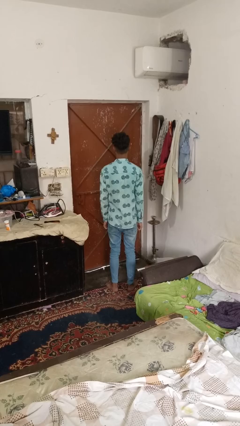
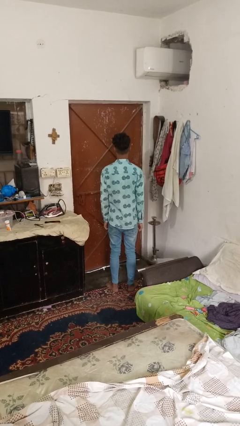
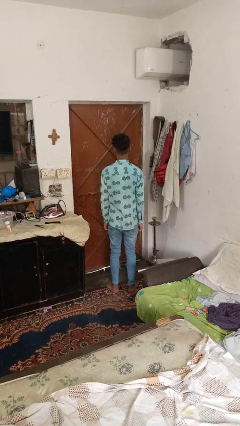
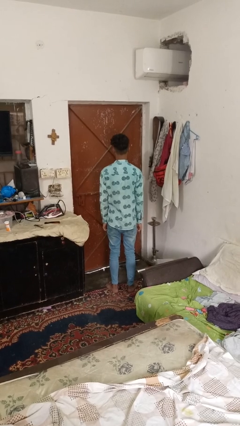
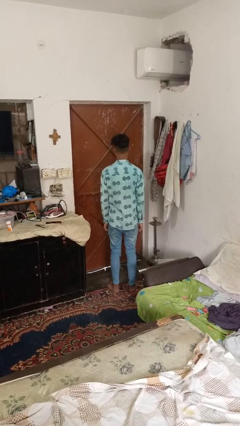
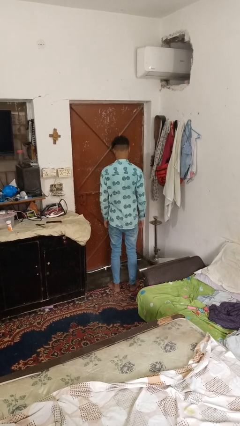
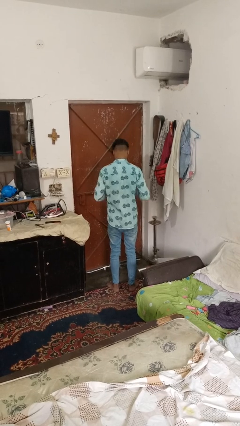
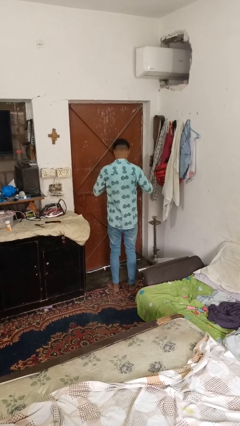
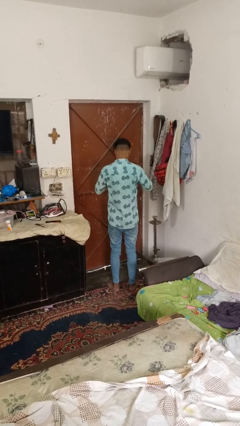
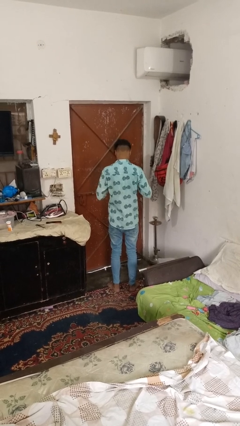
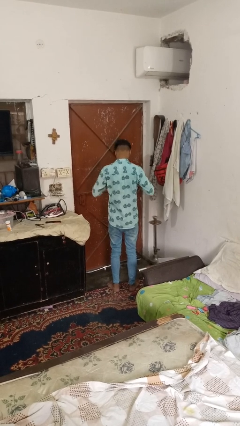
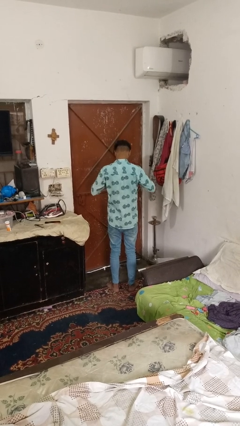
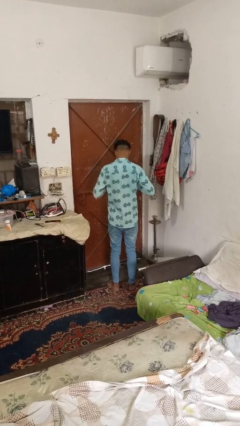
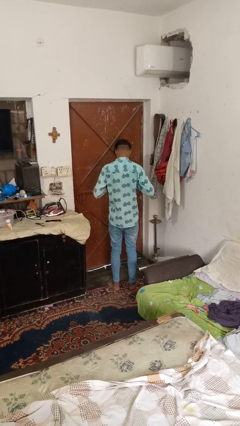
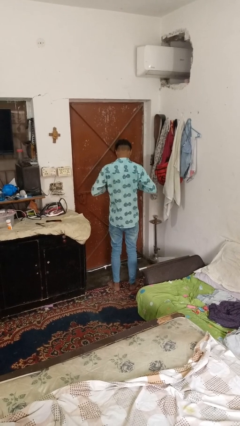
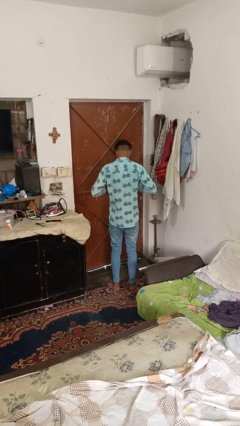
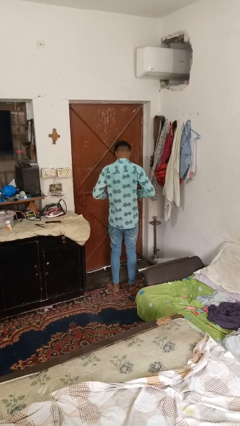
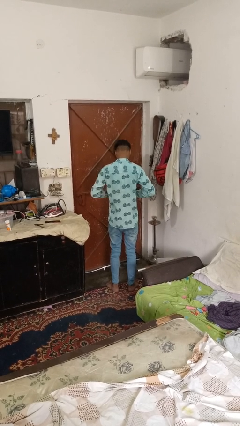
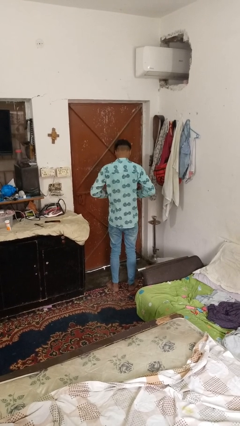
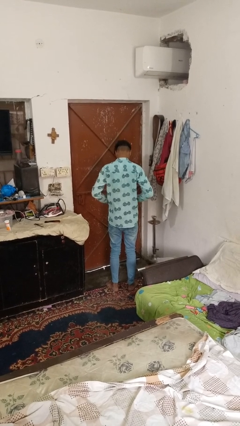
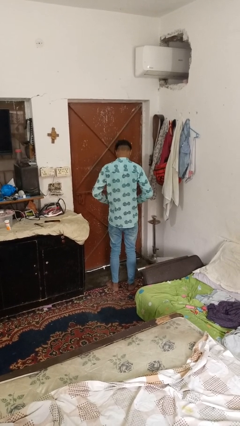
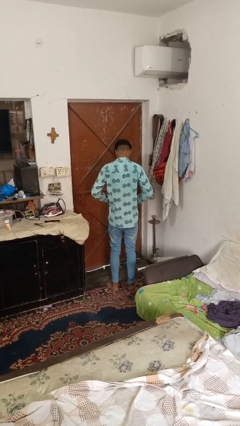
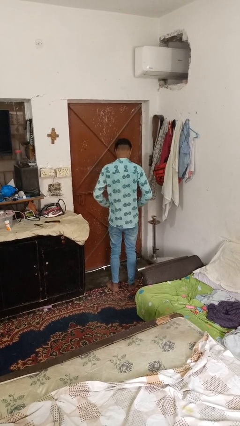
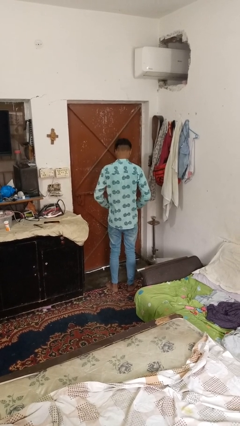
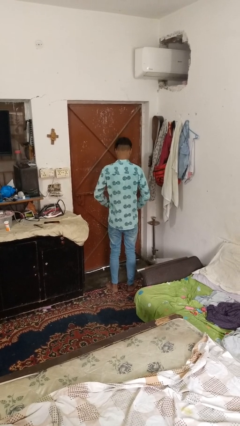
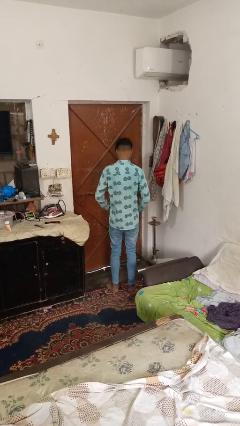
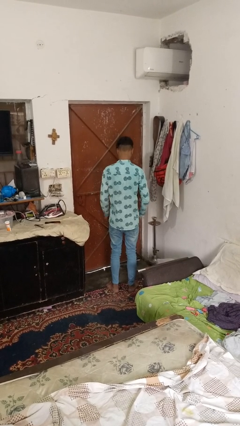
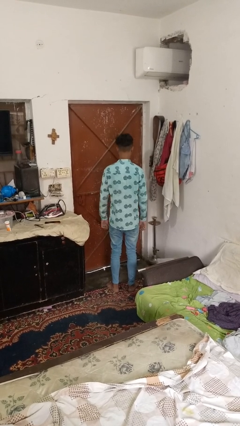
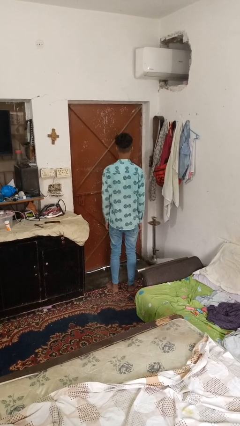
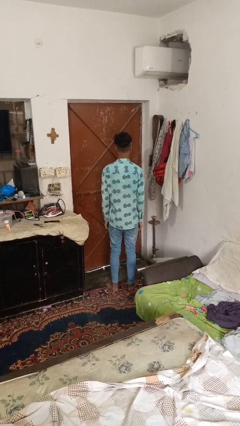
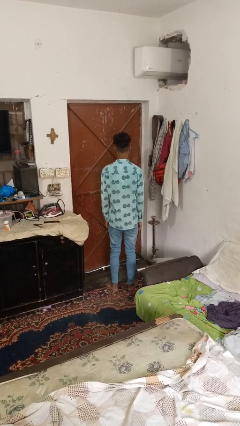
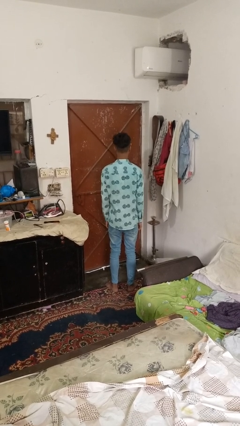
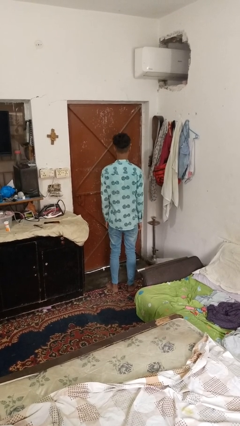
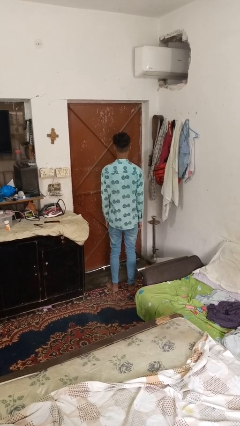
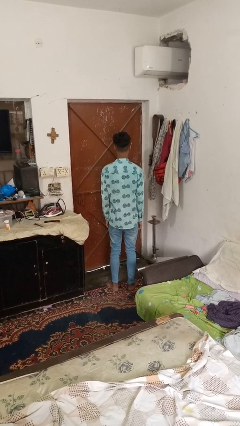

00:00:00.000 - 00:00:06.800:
person unbuttons shirt

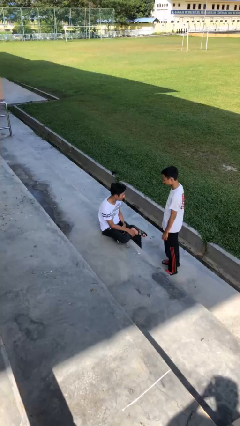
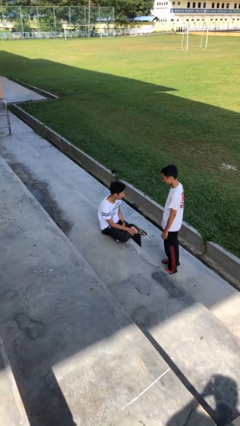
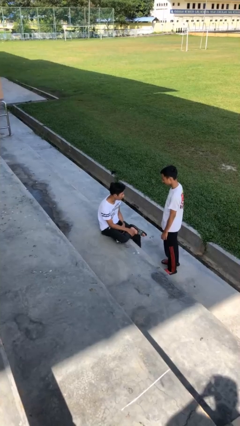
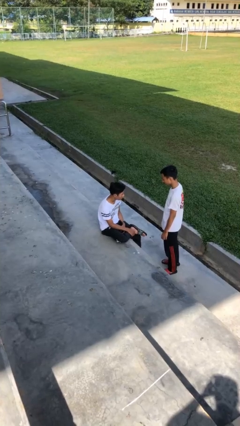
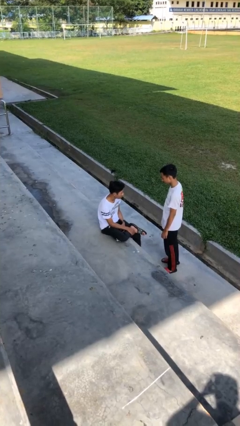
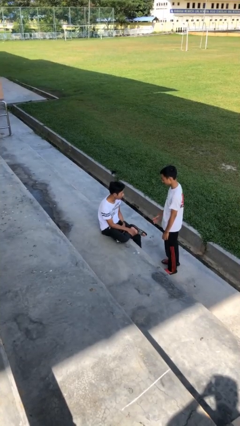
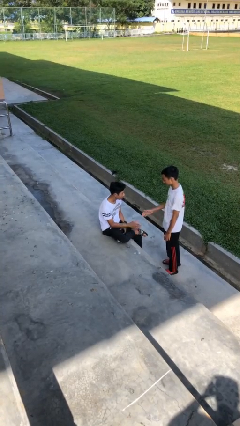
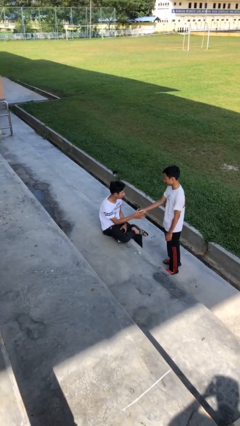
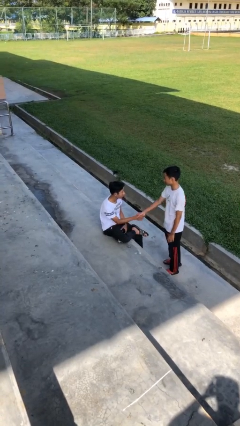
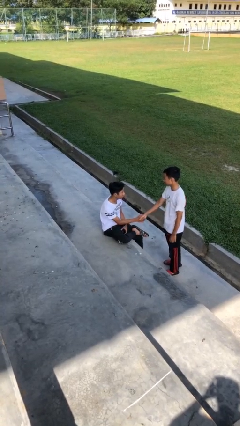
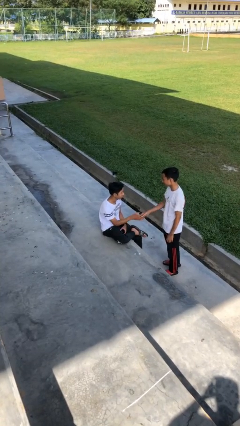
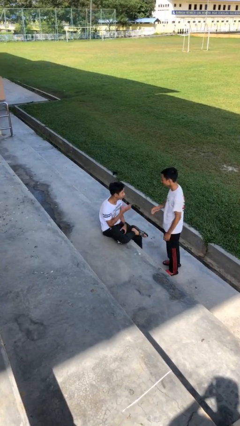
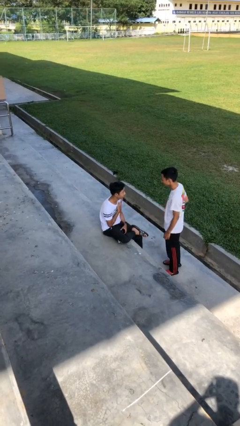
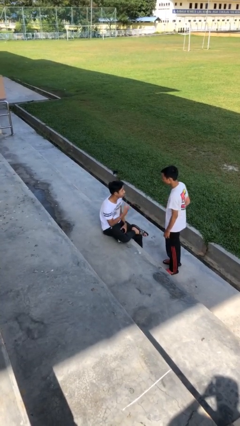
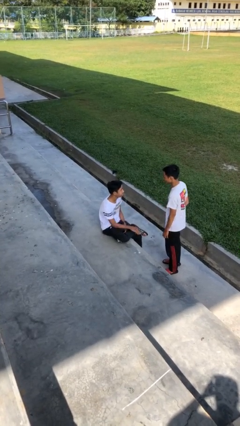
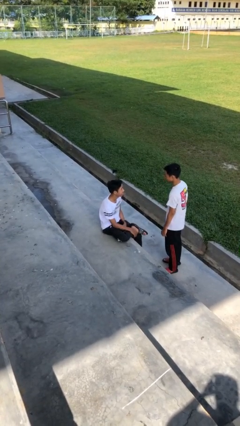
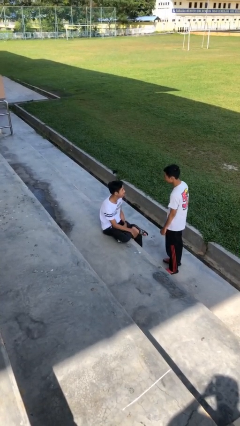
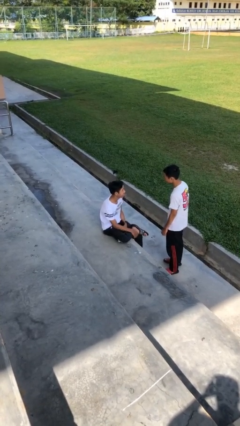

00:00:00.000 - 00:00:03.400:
person shakes hand

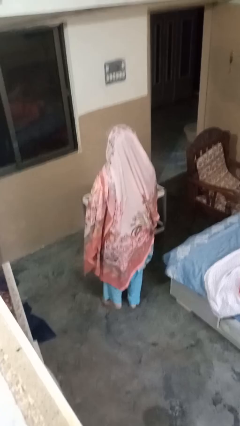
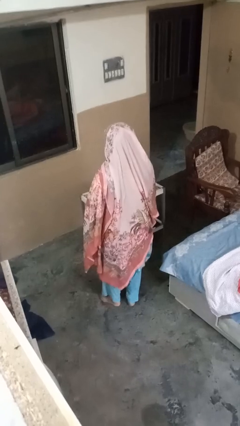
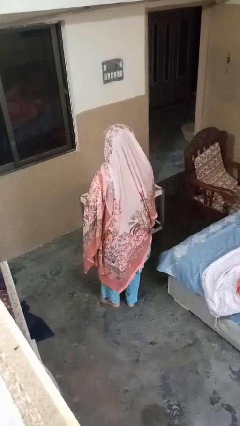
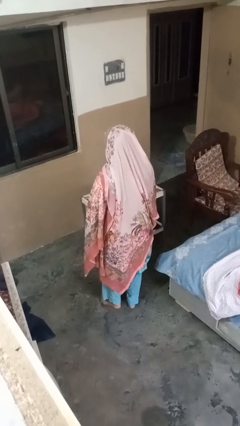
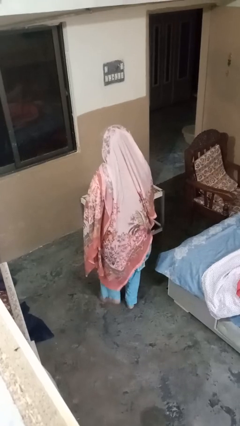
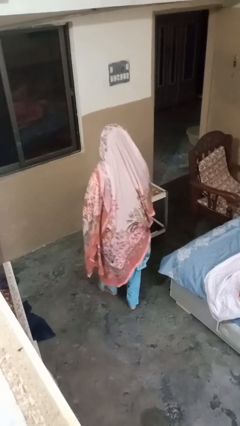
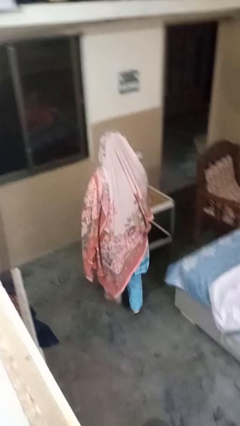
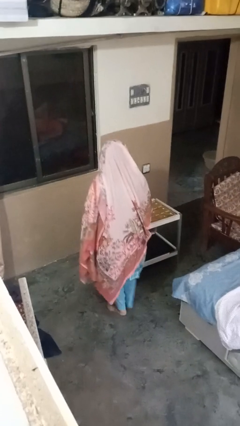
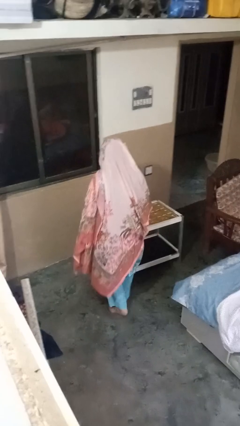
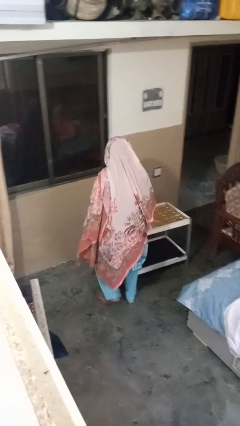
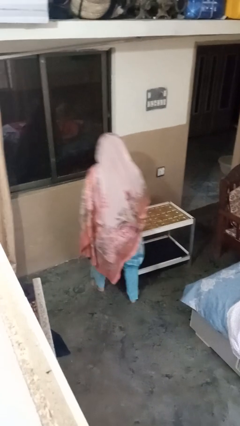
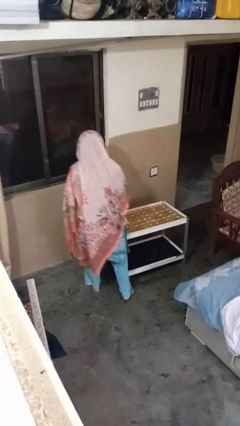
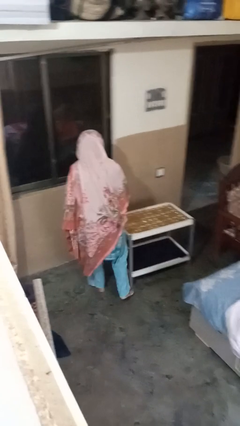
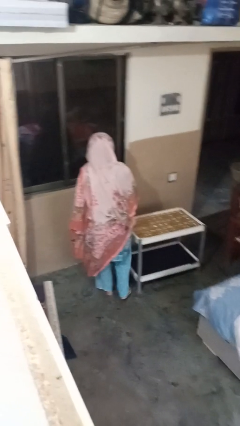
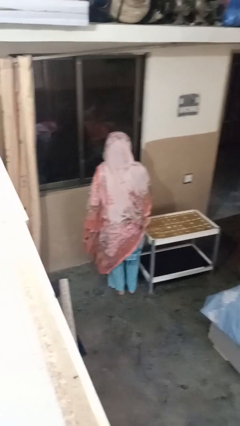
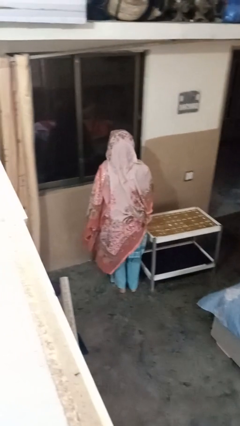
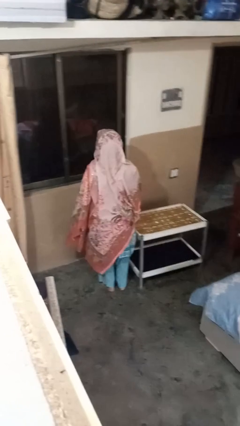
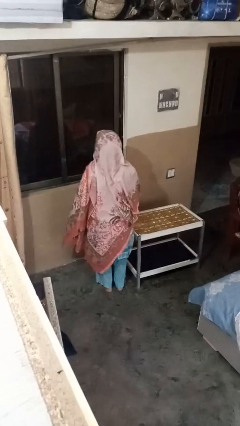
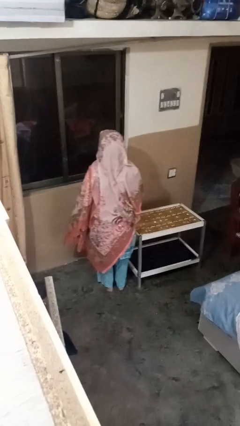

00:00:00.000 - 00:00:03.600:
person bumps into table

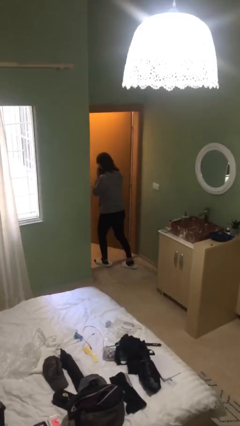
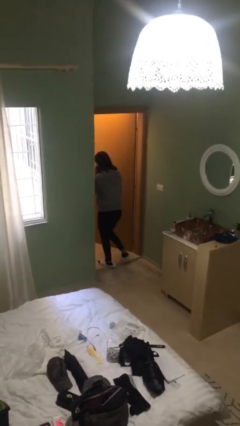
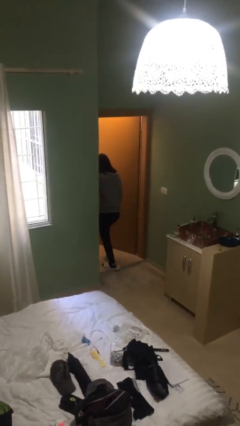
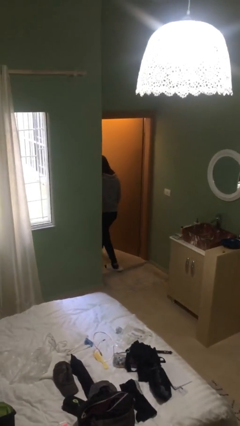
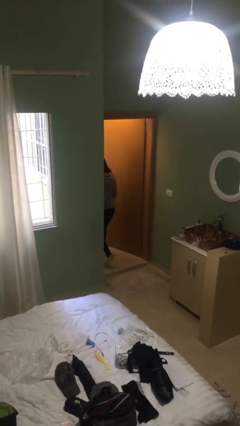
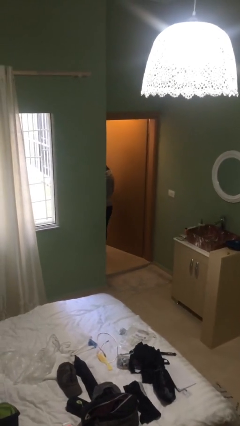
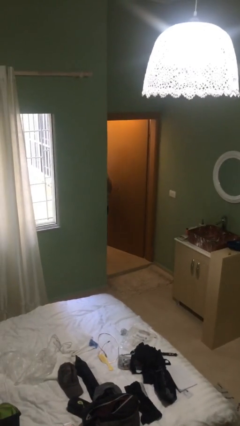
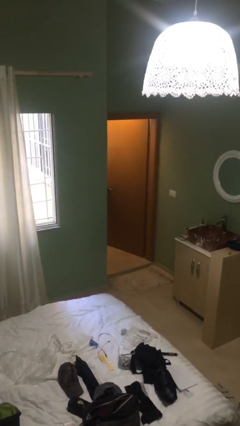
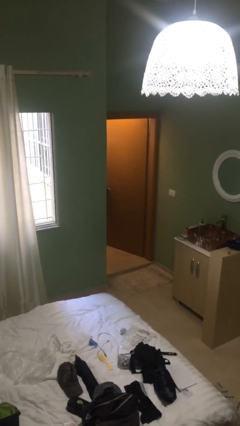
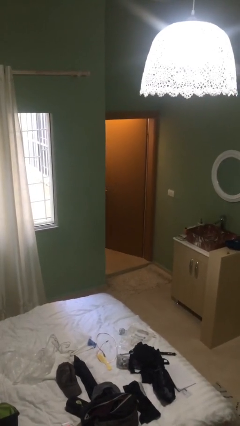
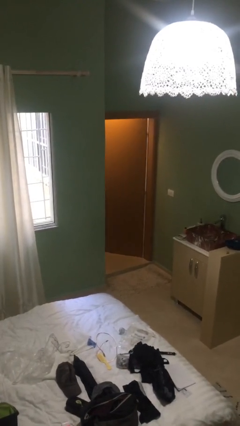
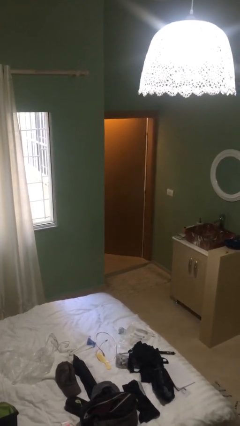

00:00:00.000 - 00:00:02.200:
person exits scene through structure

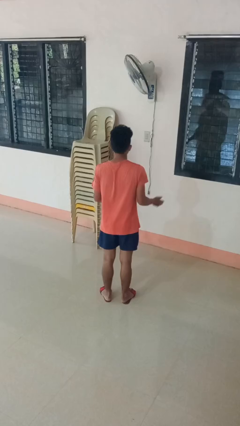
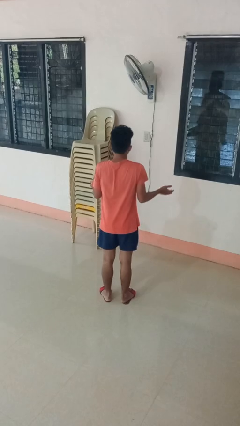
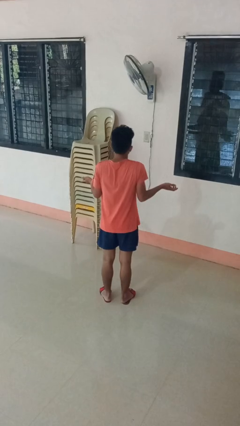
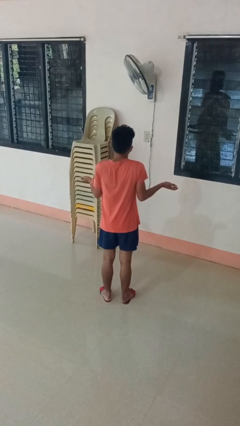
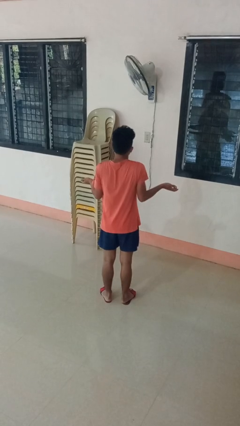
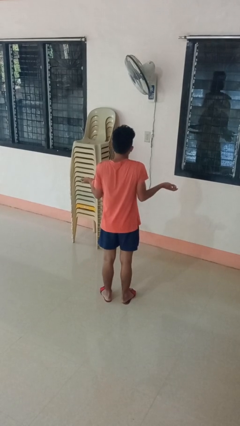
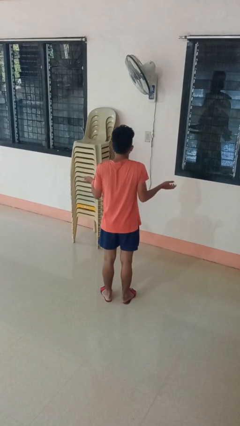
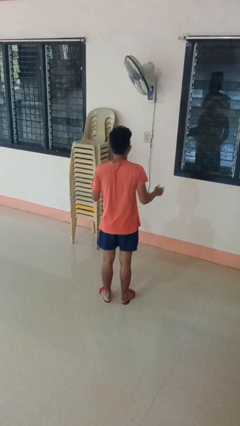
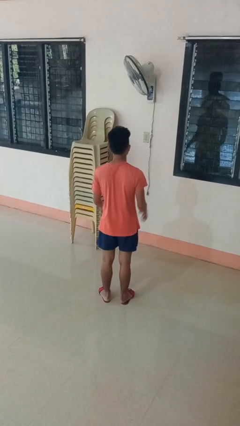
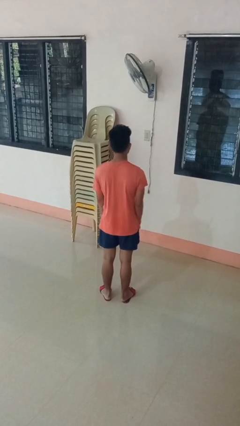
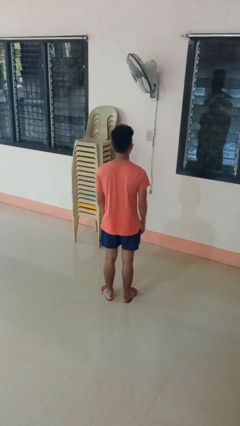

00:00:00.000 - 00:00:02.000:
person shrugs
